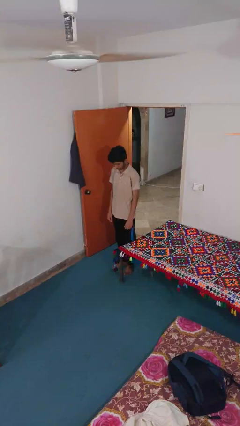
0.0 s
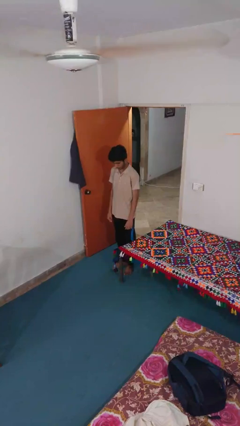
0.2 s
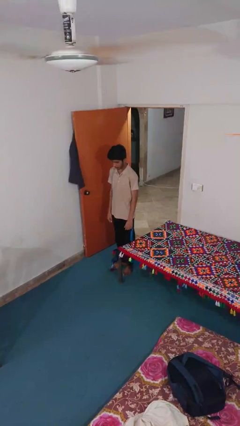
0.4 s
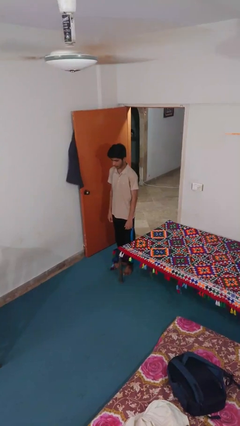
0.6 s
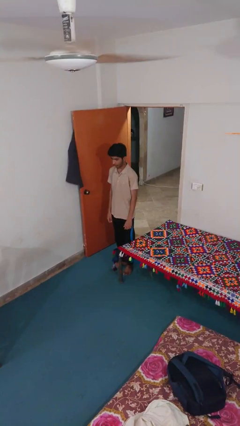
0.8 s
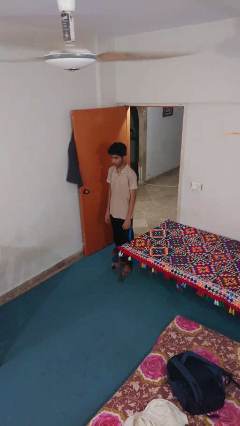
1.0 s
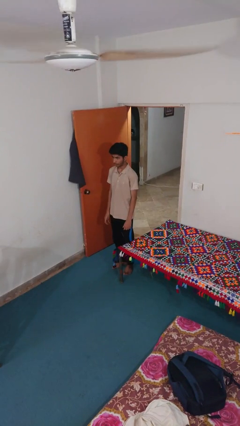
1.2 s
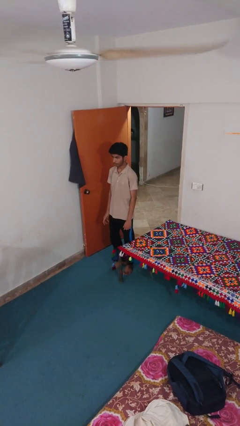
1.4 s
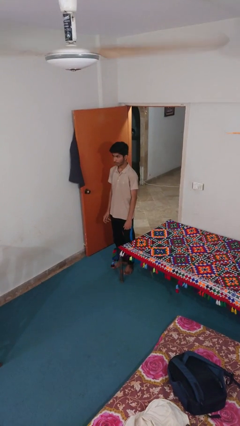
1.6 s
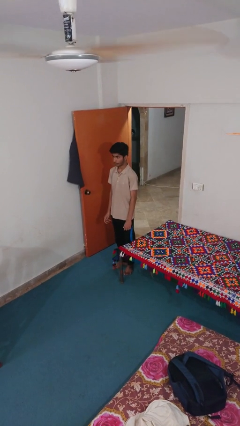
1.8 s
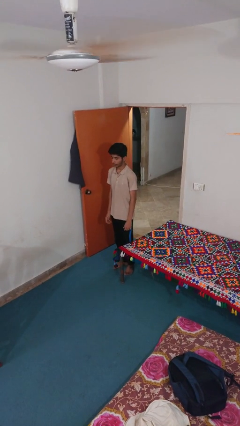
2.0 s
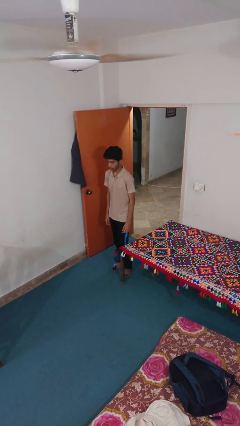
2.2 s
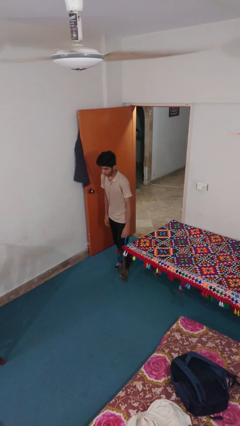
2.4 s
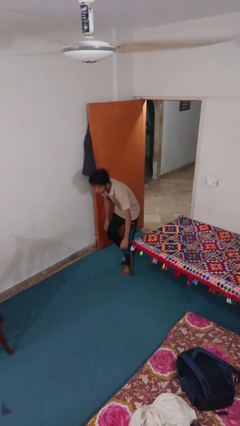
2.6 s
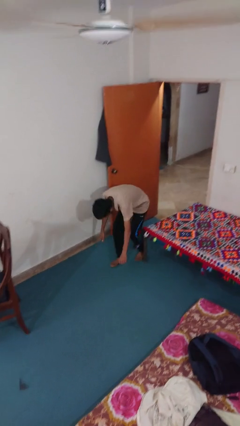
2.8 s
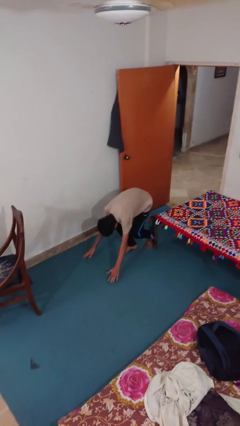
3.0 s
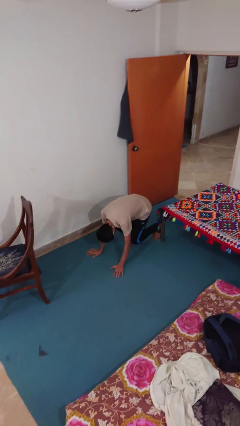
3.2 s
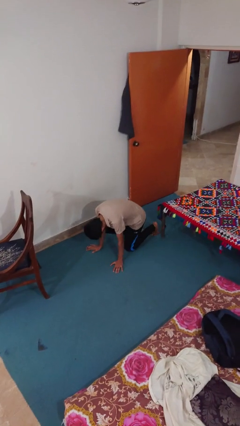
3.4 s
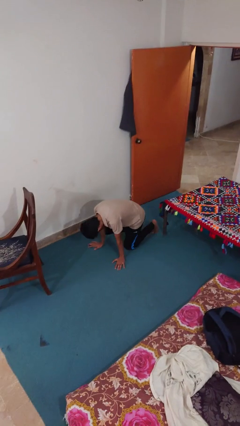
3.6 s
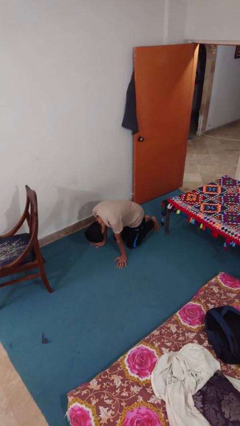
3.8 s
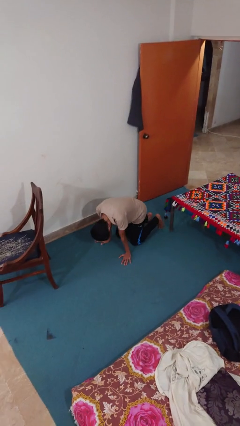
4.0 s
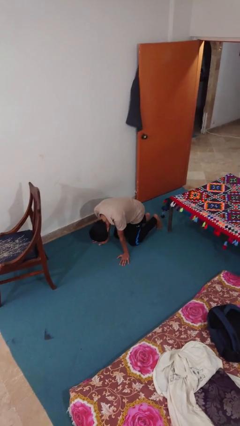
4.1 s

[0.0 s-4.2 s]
person trips on object on floor

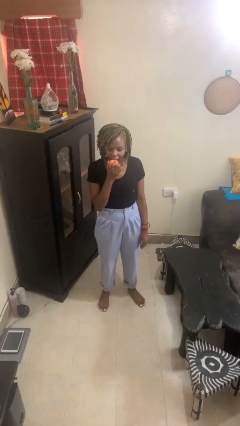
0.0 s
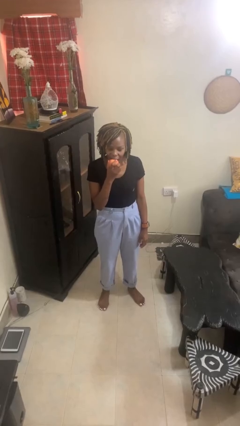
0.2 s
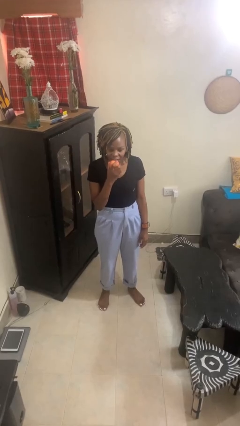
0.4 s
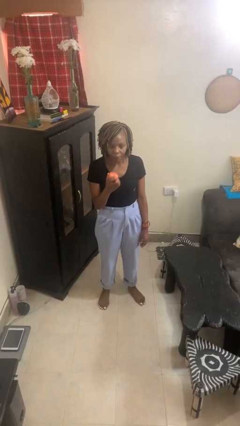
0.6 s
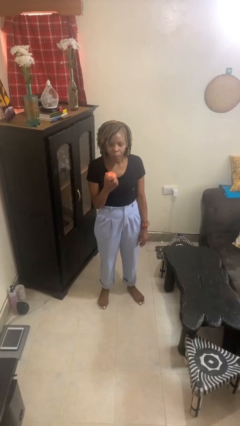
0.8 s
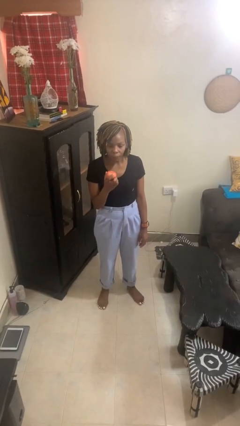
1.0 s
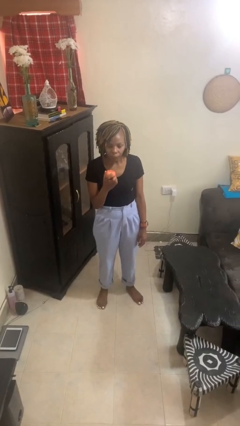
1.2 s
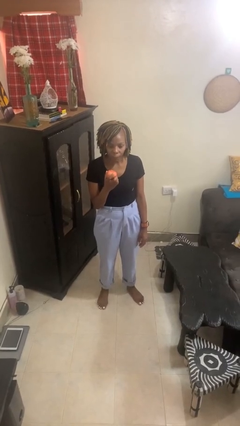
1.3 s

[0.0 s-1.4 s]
person eats apple

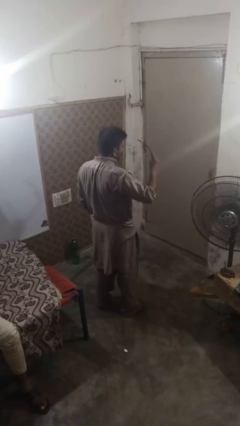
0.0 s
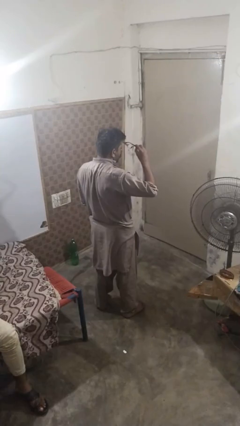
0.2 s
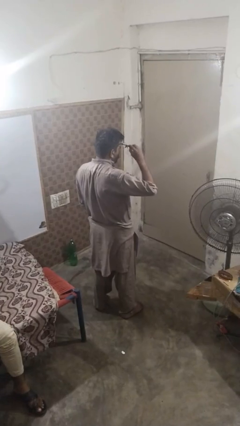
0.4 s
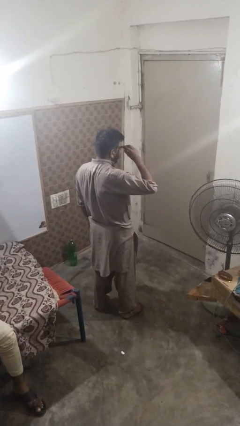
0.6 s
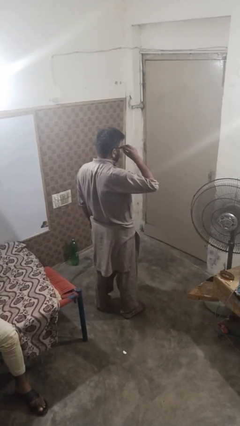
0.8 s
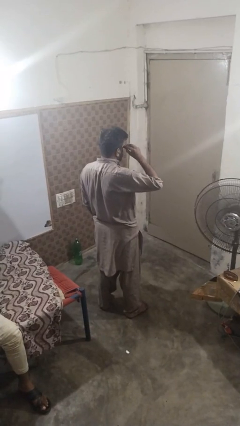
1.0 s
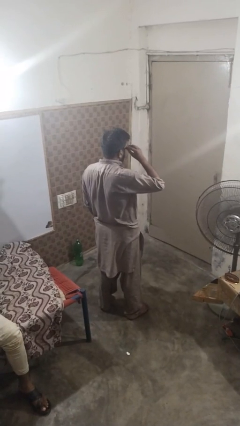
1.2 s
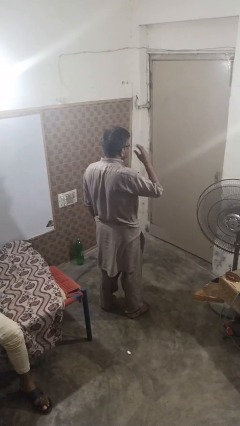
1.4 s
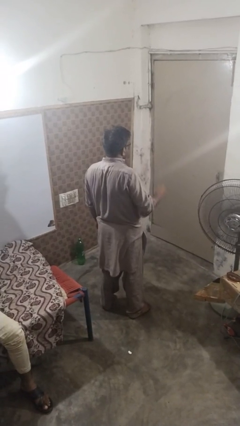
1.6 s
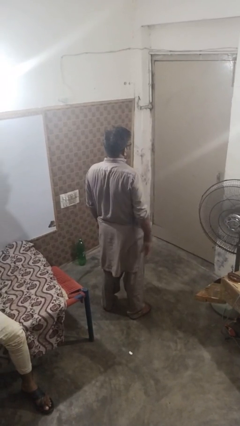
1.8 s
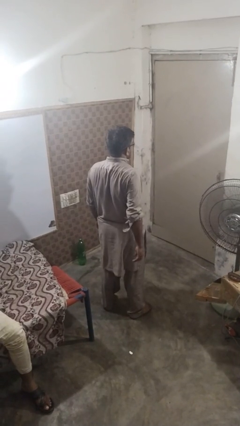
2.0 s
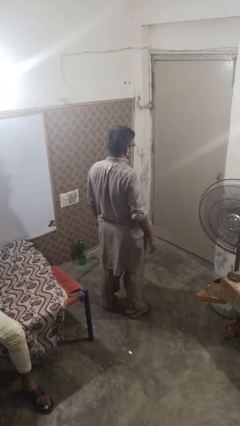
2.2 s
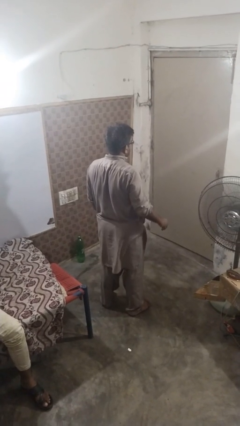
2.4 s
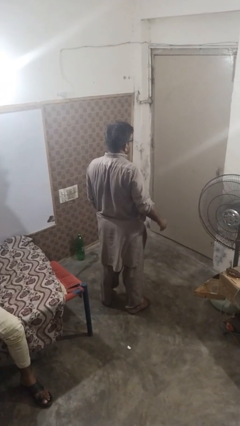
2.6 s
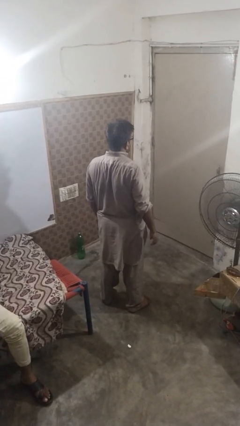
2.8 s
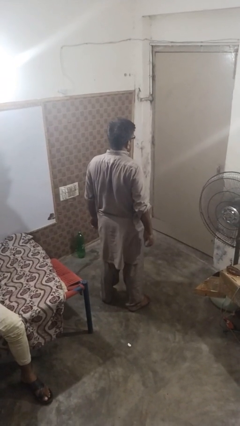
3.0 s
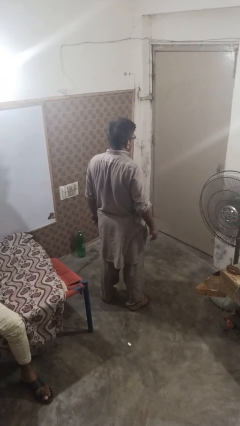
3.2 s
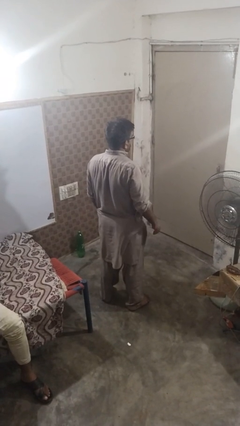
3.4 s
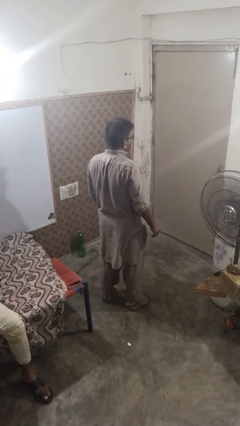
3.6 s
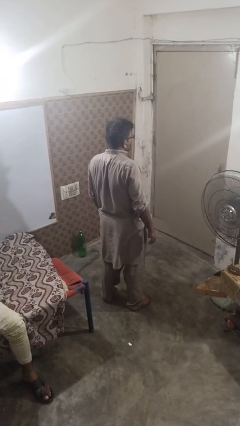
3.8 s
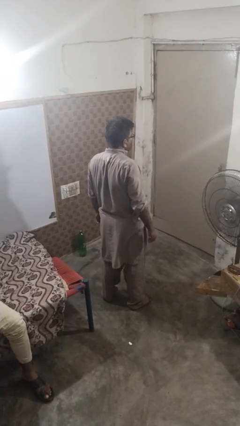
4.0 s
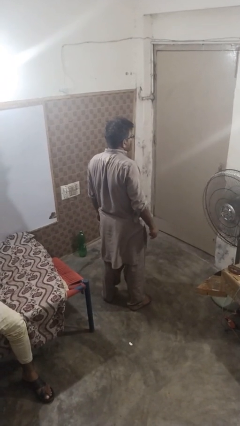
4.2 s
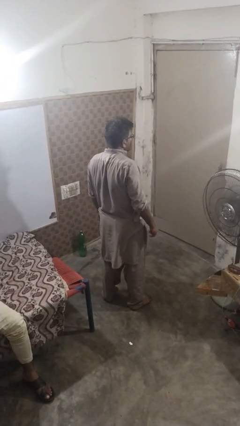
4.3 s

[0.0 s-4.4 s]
person puts on glasses

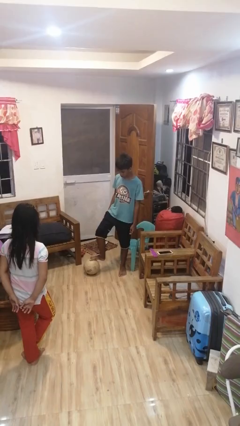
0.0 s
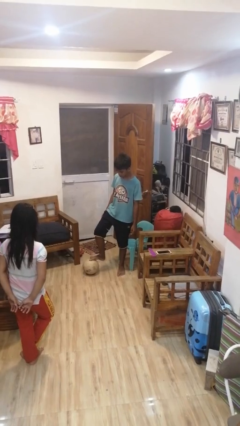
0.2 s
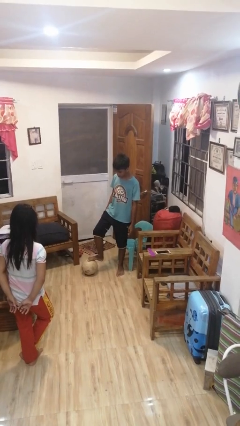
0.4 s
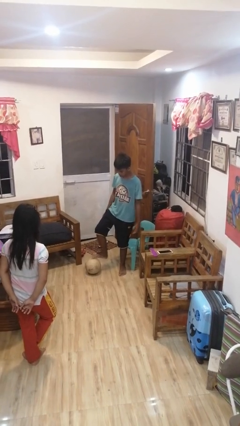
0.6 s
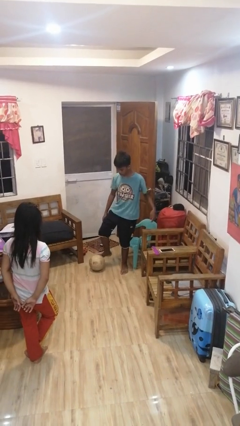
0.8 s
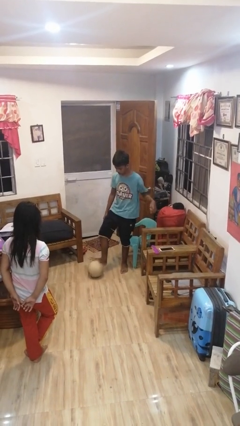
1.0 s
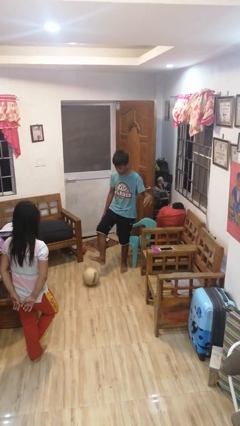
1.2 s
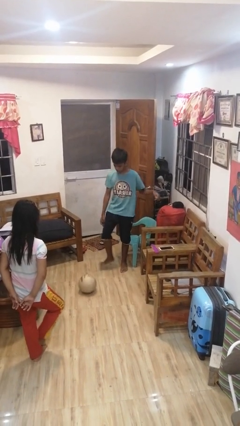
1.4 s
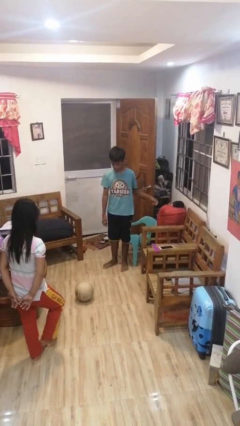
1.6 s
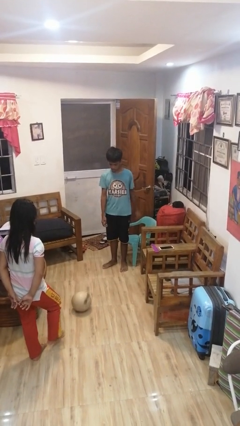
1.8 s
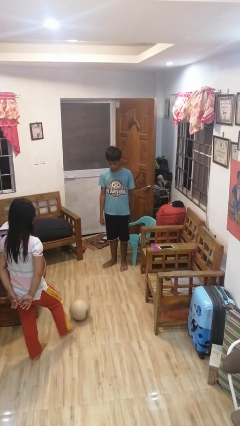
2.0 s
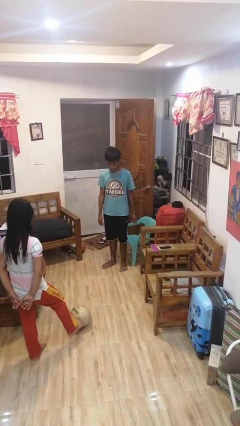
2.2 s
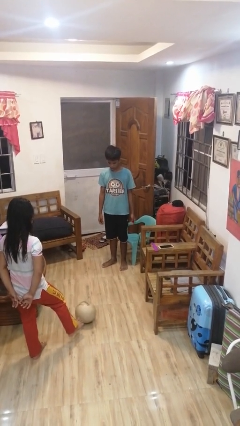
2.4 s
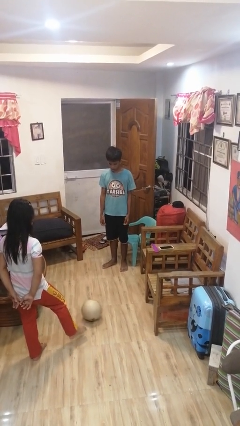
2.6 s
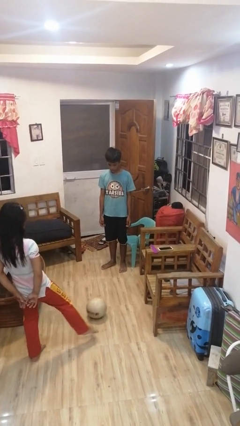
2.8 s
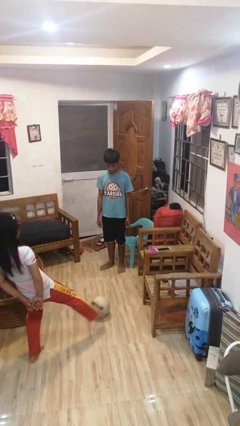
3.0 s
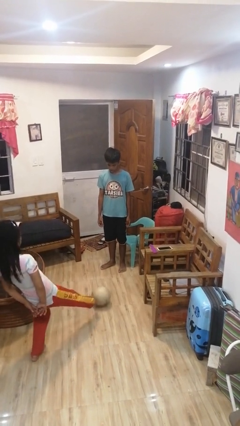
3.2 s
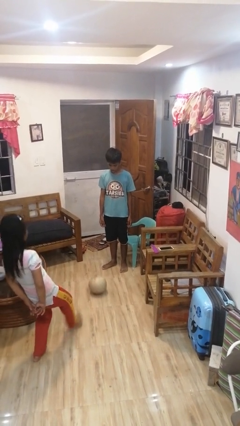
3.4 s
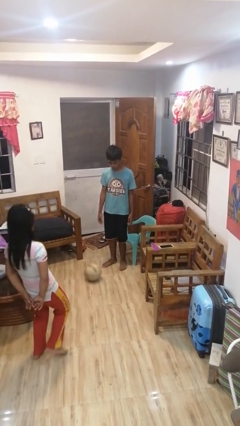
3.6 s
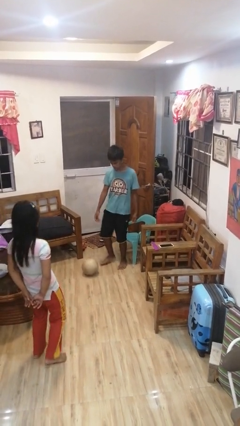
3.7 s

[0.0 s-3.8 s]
person kicks object to person

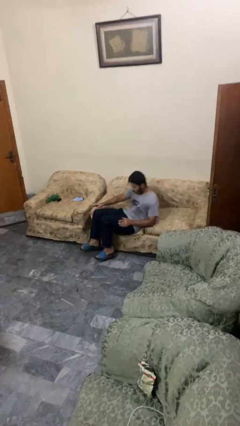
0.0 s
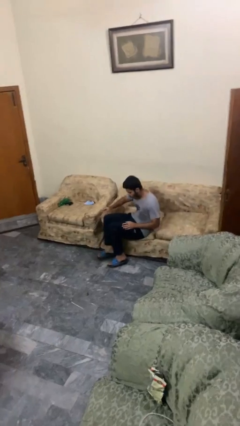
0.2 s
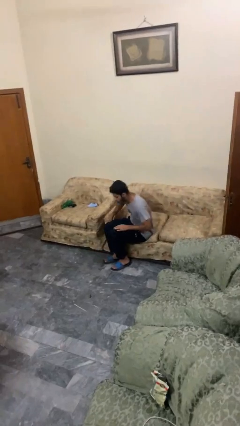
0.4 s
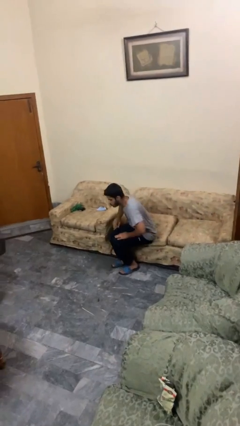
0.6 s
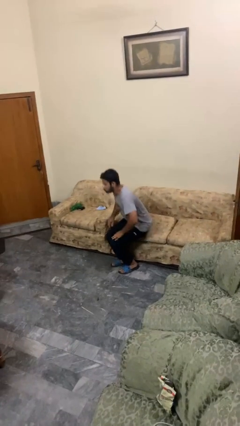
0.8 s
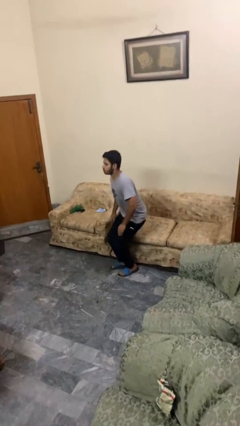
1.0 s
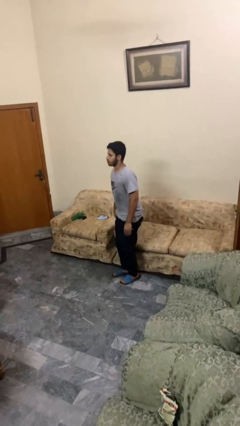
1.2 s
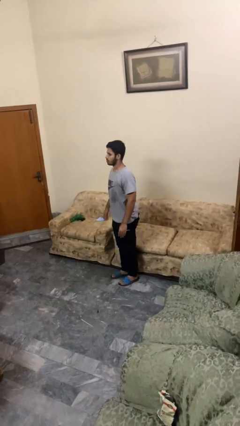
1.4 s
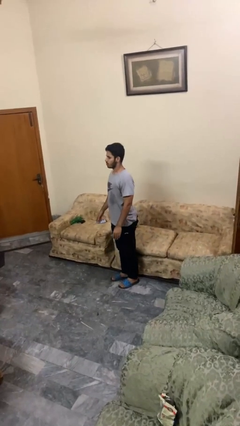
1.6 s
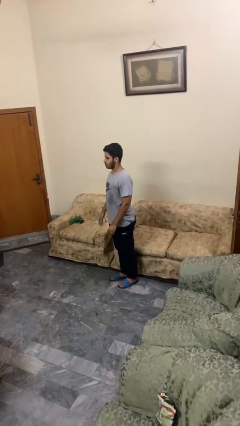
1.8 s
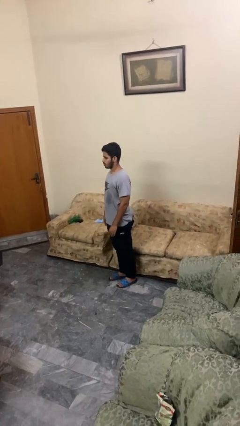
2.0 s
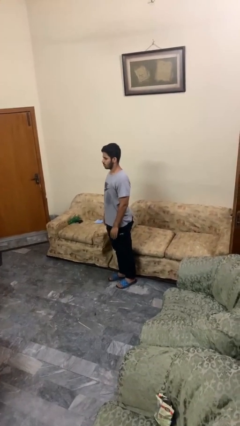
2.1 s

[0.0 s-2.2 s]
person stands up

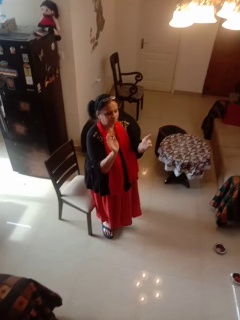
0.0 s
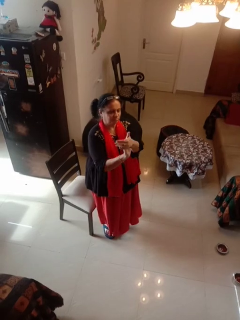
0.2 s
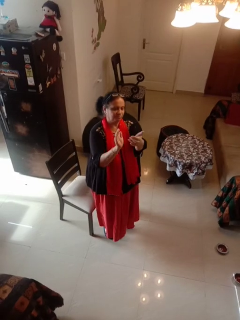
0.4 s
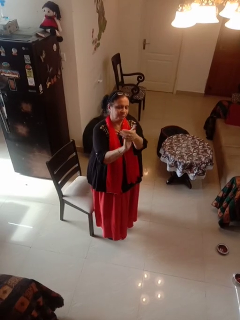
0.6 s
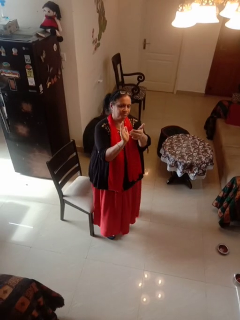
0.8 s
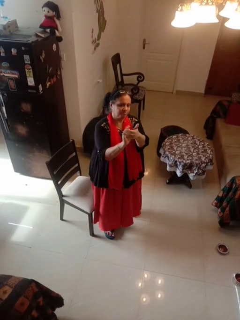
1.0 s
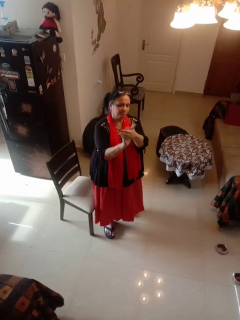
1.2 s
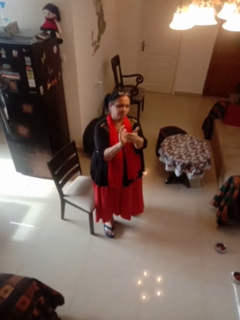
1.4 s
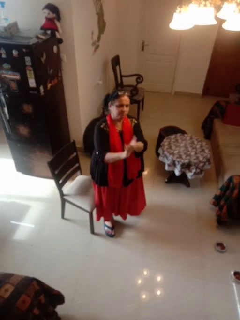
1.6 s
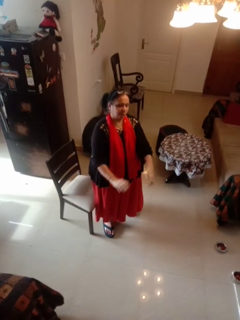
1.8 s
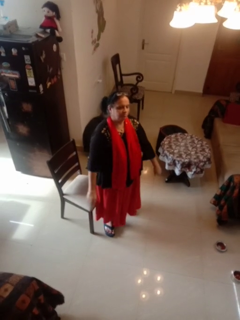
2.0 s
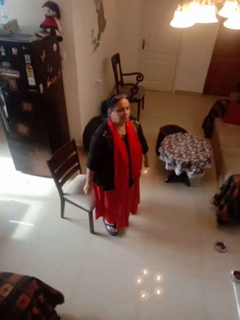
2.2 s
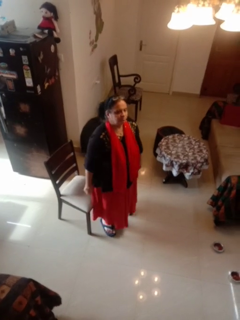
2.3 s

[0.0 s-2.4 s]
person claps hands
